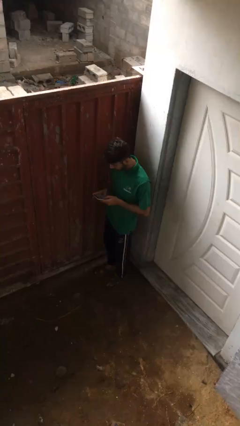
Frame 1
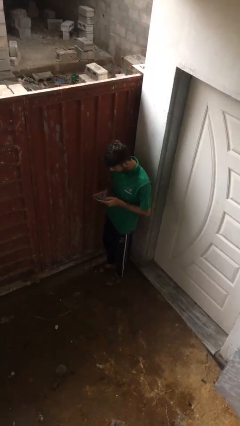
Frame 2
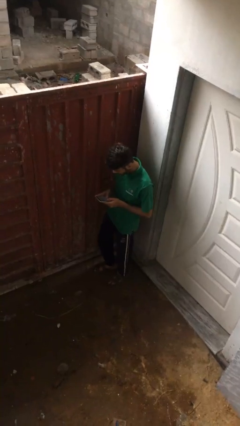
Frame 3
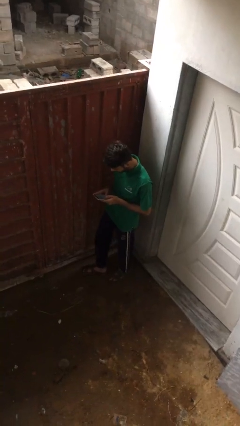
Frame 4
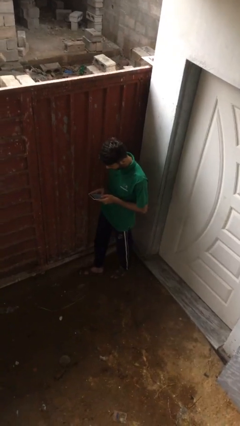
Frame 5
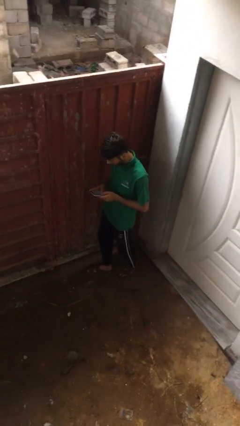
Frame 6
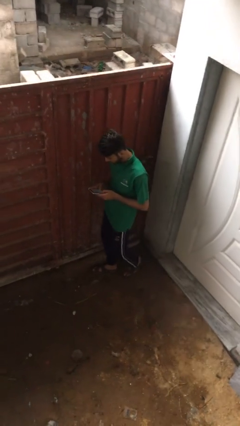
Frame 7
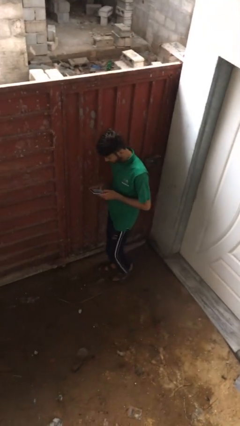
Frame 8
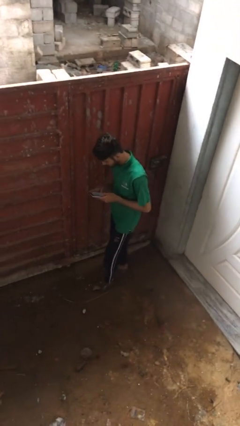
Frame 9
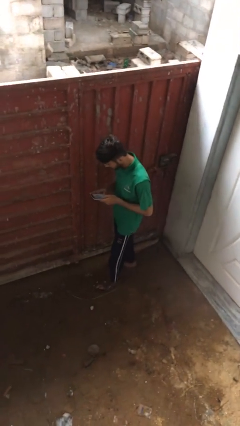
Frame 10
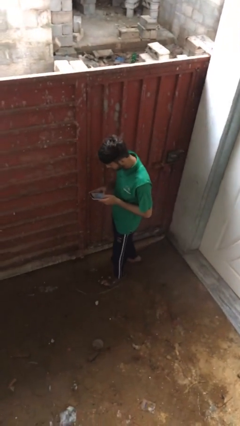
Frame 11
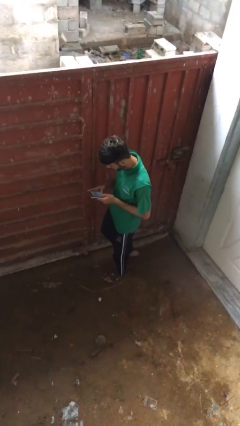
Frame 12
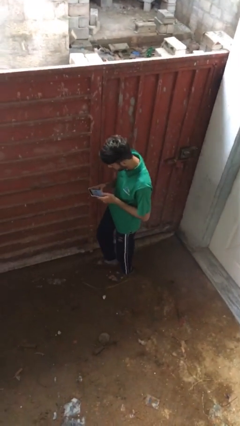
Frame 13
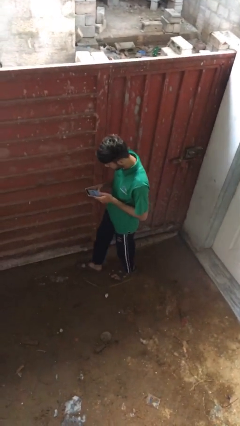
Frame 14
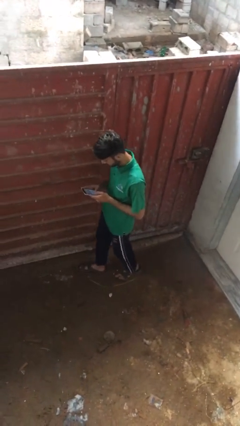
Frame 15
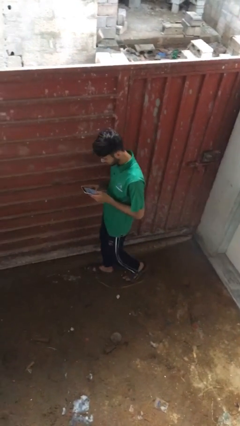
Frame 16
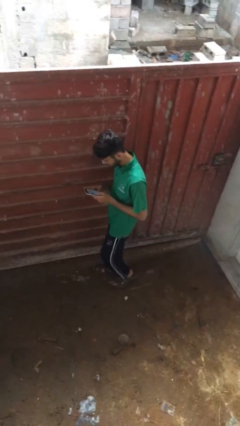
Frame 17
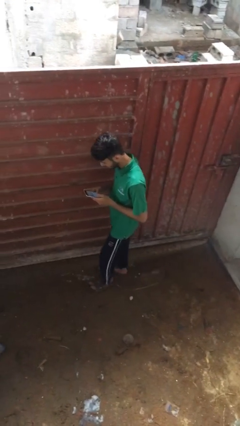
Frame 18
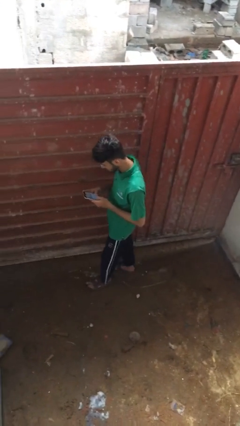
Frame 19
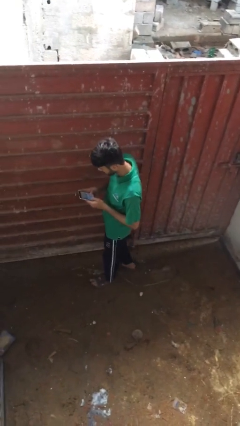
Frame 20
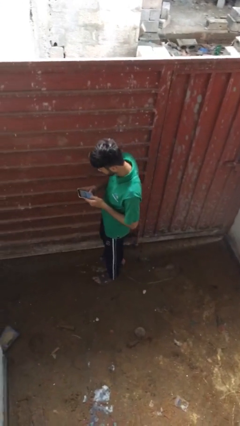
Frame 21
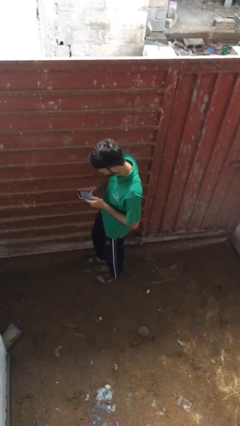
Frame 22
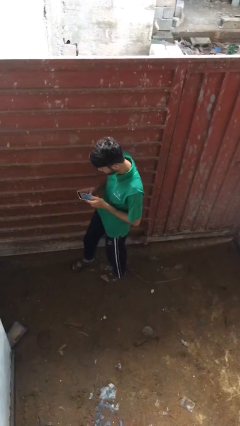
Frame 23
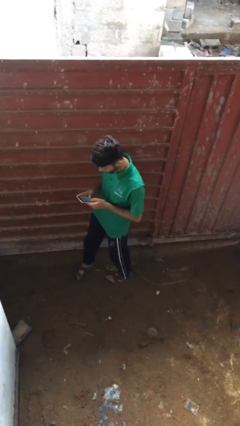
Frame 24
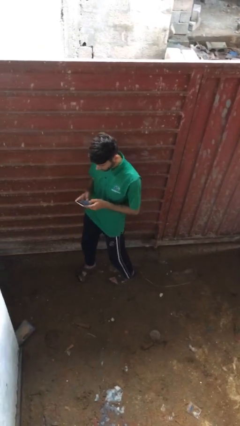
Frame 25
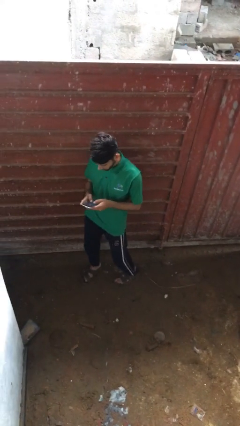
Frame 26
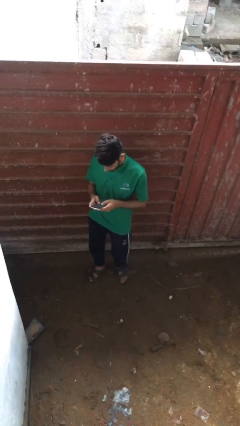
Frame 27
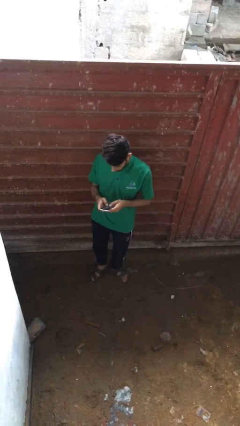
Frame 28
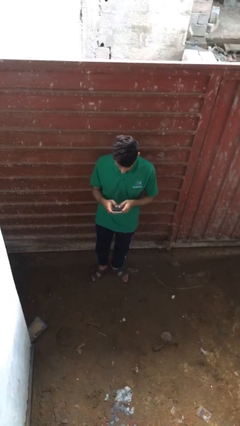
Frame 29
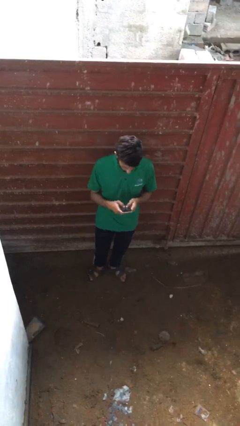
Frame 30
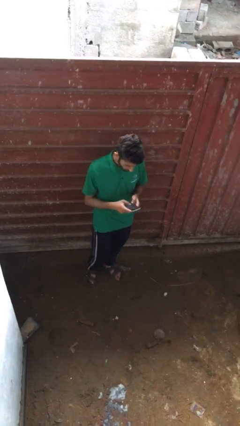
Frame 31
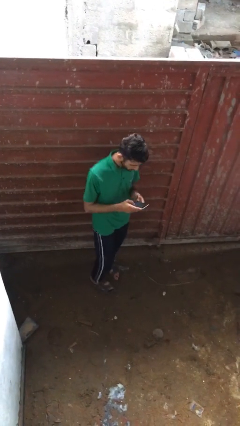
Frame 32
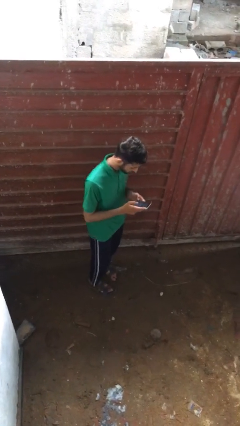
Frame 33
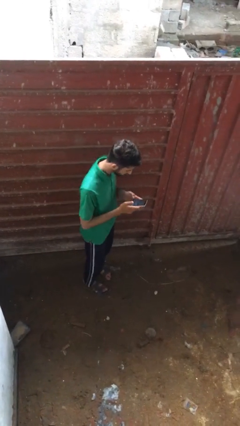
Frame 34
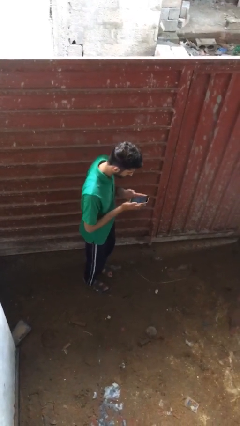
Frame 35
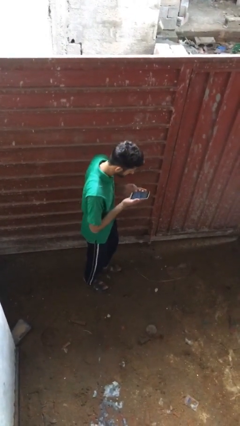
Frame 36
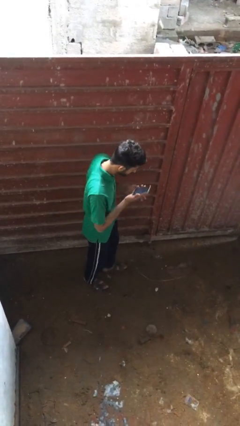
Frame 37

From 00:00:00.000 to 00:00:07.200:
person texts on phone

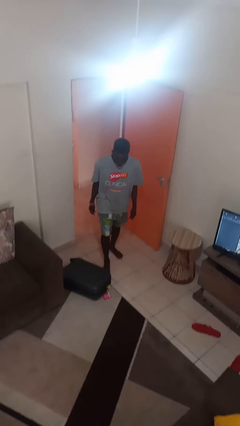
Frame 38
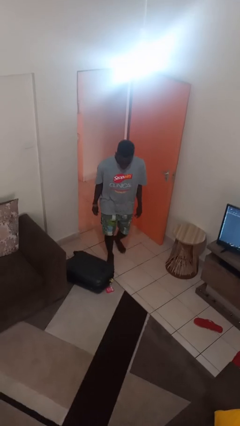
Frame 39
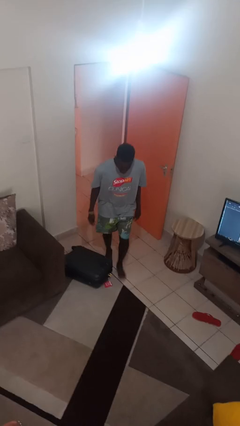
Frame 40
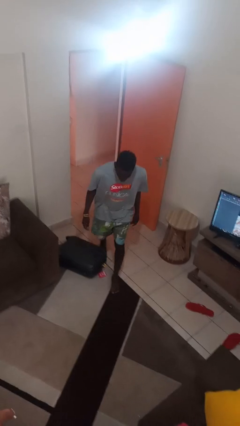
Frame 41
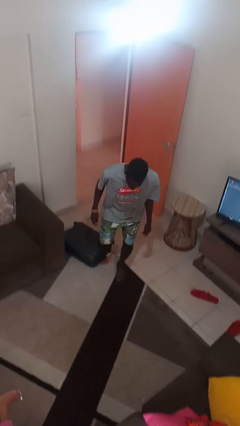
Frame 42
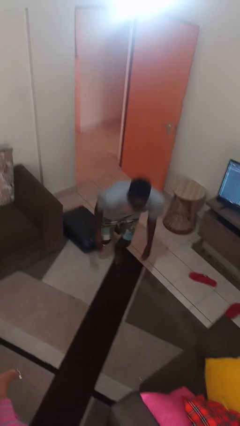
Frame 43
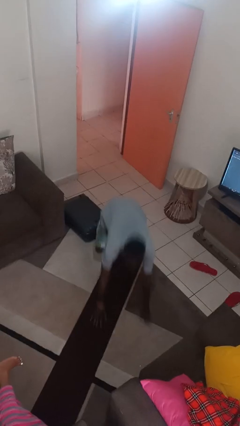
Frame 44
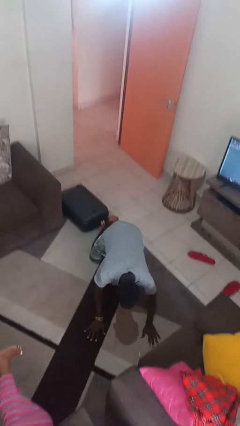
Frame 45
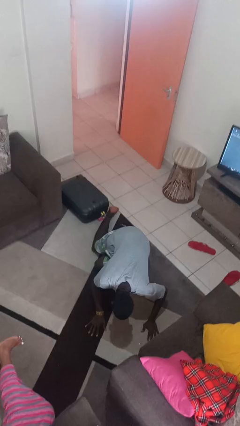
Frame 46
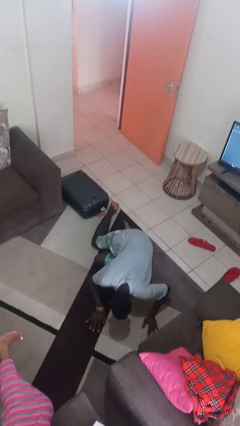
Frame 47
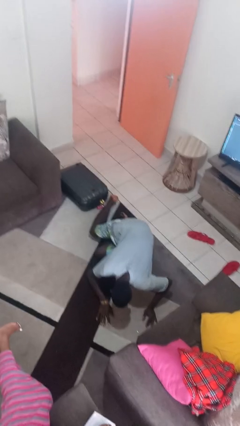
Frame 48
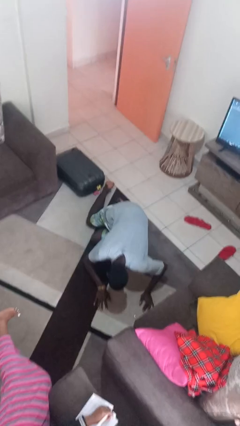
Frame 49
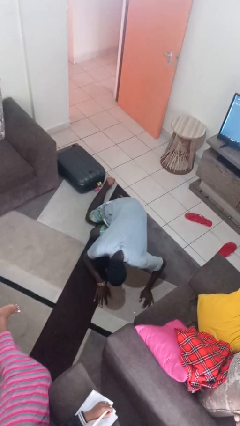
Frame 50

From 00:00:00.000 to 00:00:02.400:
person trips on object on floor

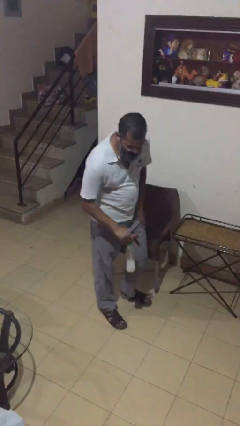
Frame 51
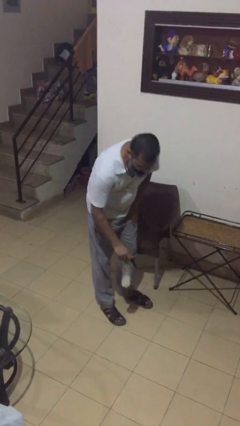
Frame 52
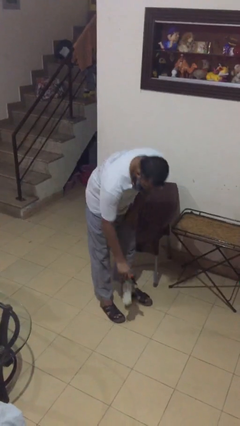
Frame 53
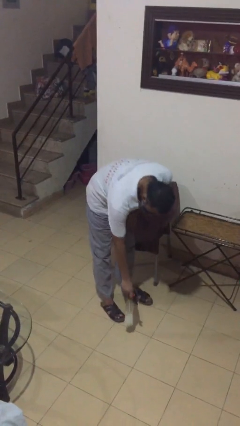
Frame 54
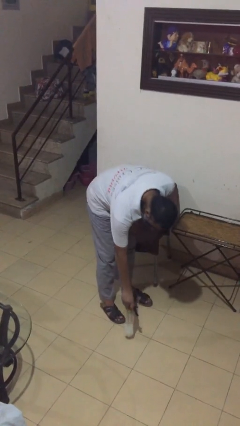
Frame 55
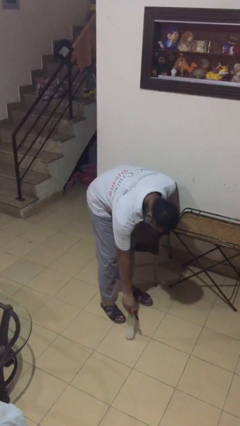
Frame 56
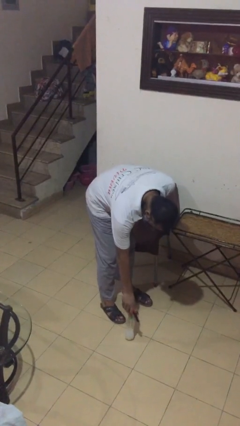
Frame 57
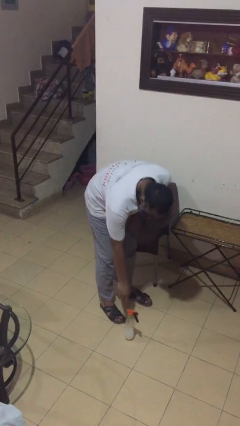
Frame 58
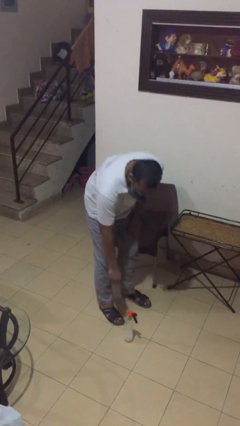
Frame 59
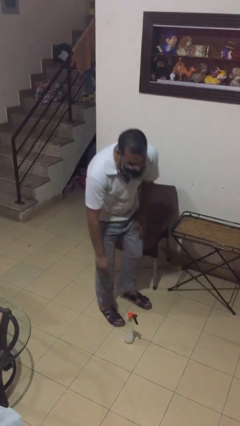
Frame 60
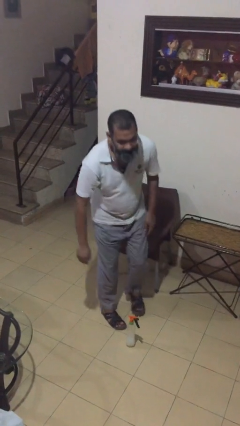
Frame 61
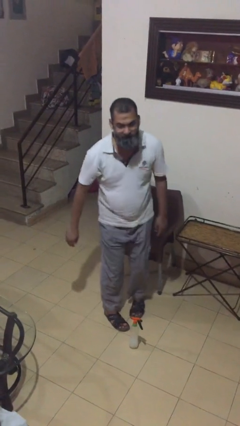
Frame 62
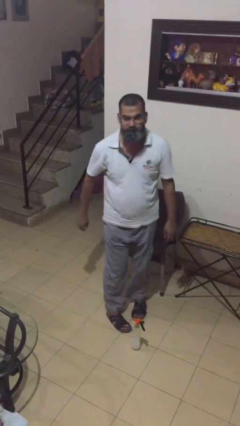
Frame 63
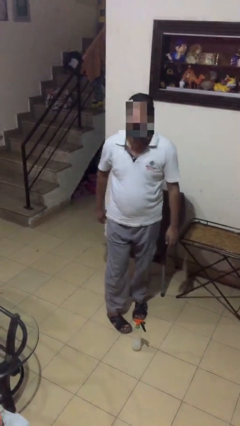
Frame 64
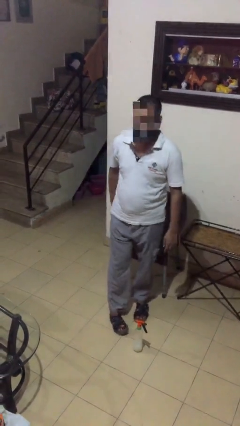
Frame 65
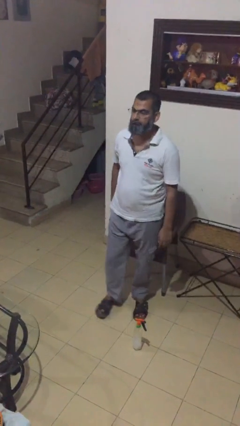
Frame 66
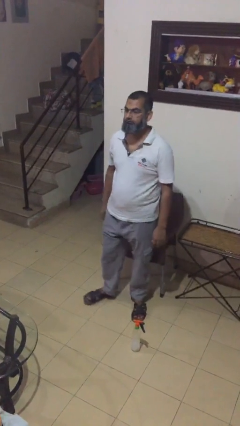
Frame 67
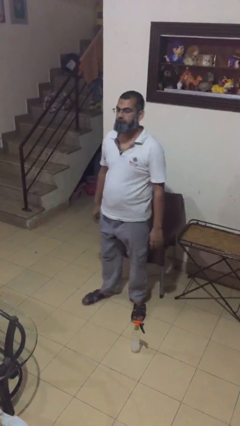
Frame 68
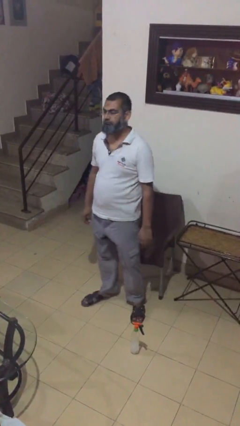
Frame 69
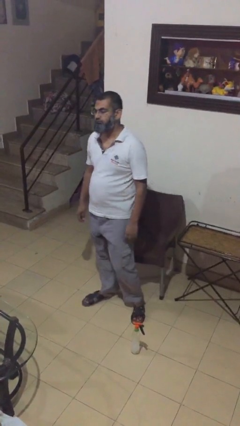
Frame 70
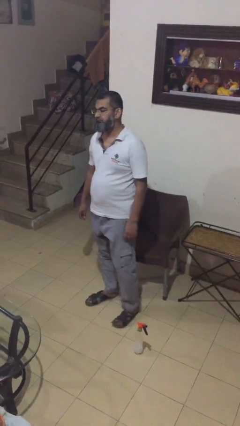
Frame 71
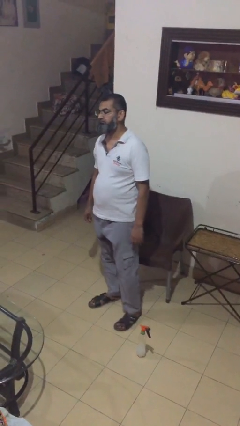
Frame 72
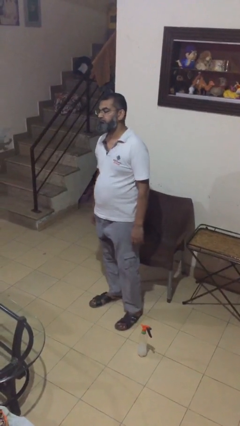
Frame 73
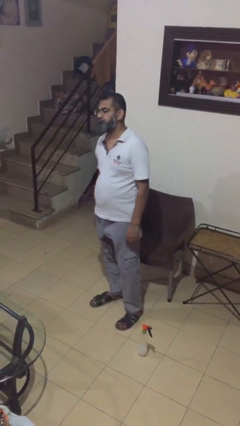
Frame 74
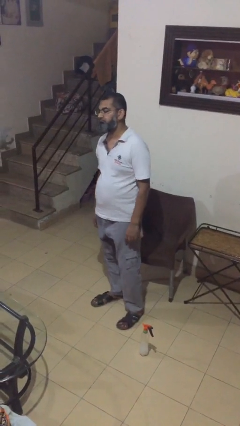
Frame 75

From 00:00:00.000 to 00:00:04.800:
person puts down object on floor

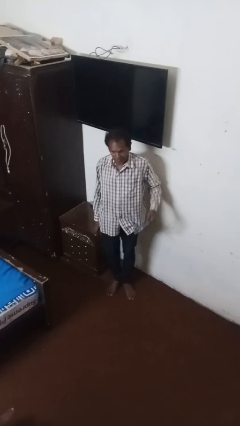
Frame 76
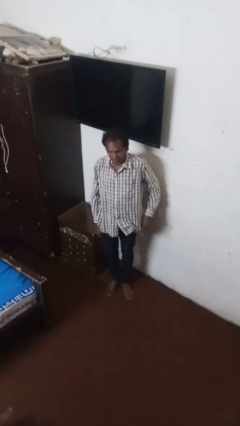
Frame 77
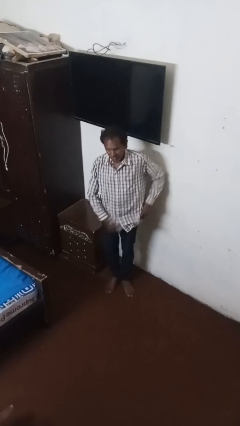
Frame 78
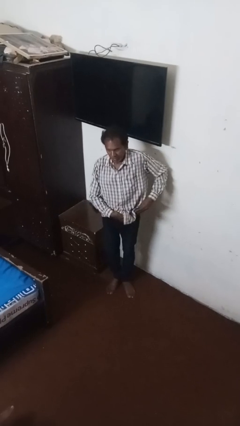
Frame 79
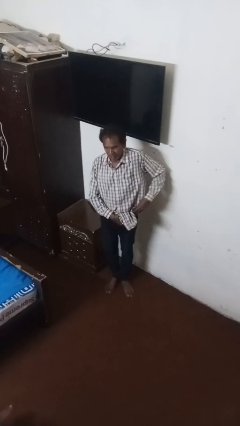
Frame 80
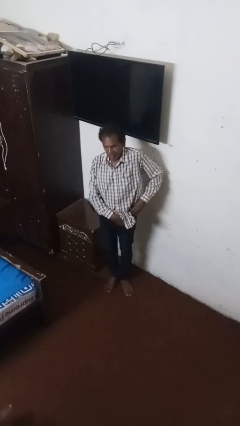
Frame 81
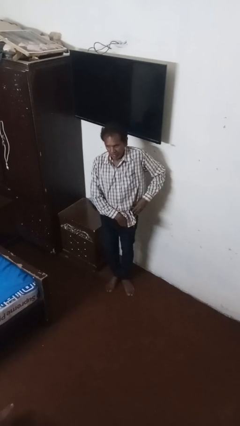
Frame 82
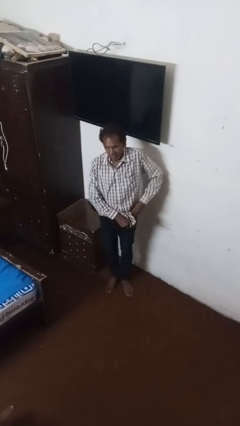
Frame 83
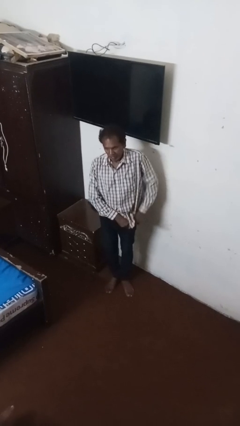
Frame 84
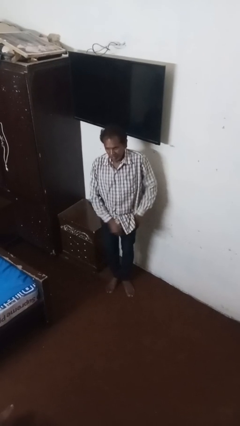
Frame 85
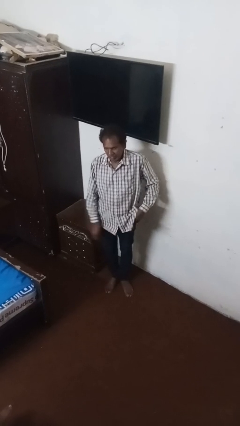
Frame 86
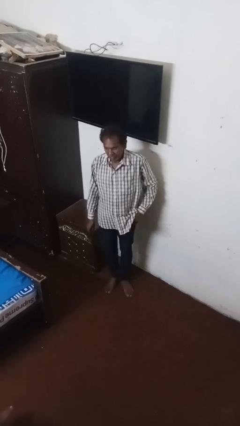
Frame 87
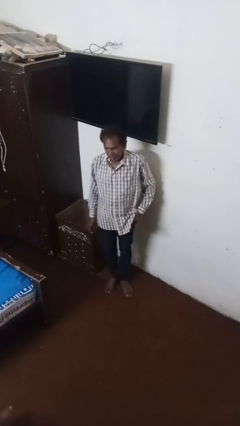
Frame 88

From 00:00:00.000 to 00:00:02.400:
person puts phone into pocket

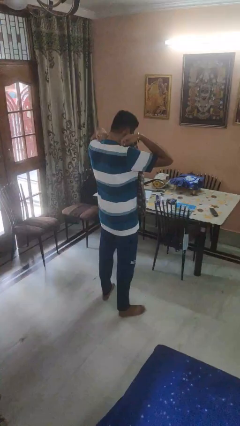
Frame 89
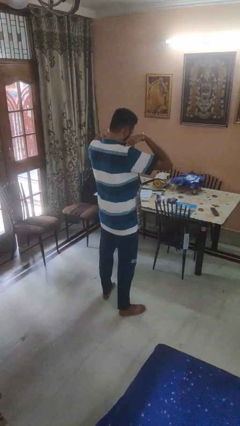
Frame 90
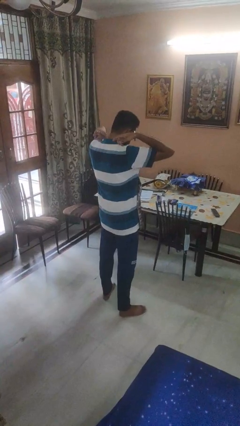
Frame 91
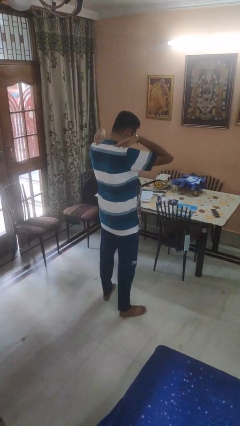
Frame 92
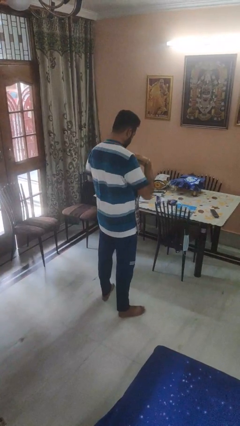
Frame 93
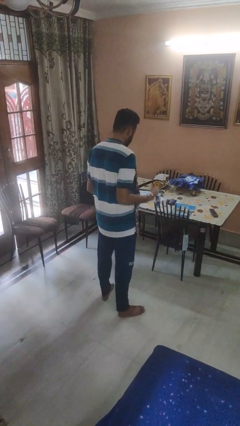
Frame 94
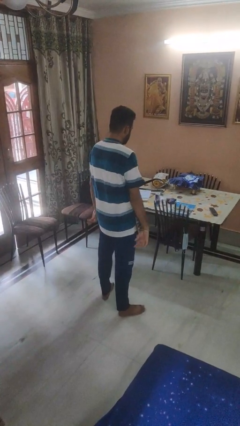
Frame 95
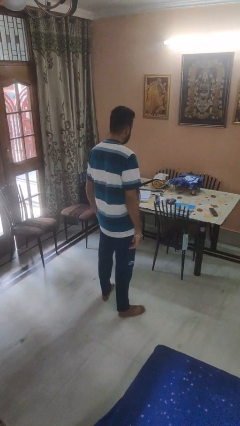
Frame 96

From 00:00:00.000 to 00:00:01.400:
person puts on apron
